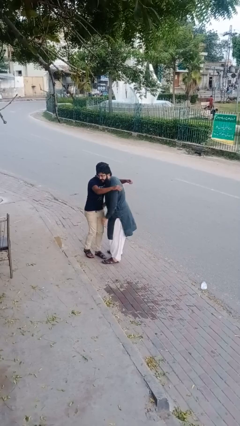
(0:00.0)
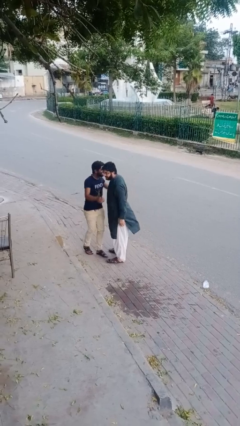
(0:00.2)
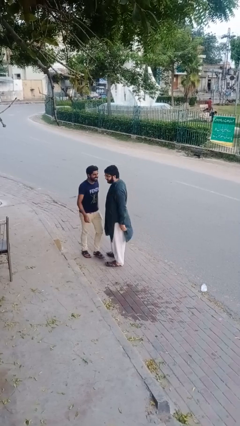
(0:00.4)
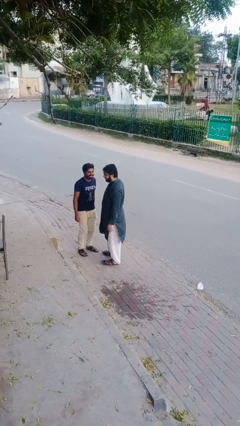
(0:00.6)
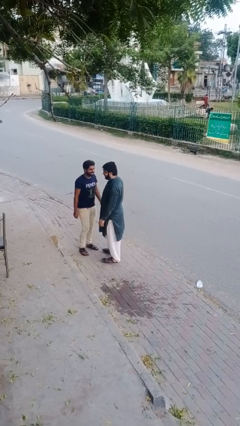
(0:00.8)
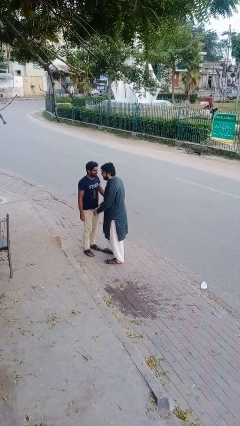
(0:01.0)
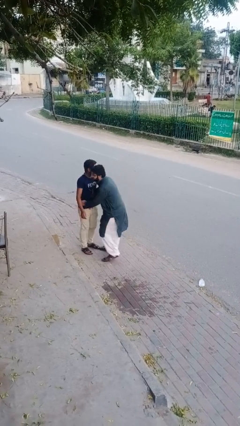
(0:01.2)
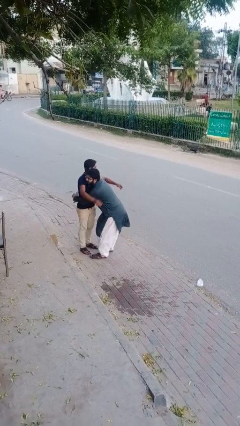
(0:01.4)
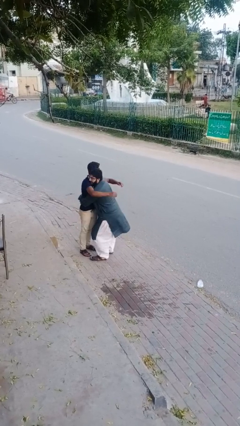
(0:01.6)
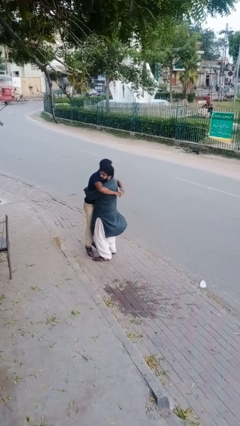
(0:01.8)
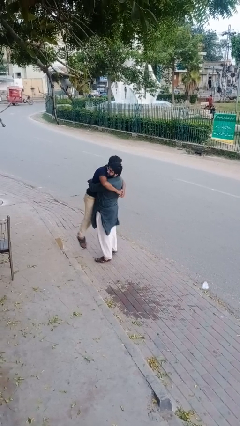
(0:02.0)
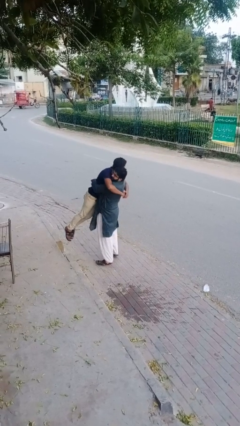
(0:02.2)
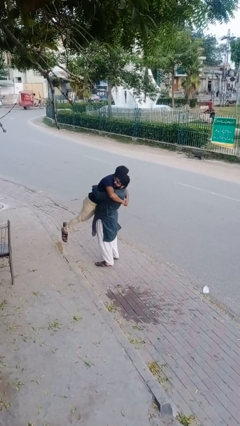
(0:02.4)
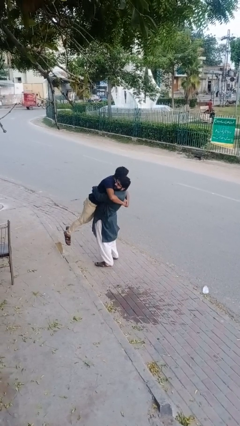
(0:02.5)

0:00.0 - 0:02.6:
person picks up person

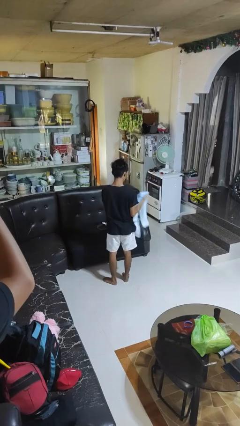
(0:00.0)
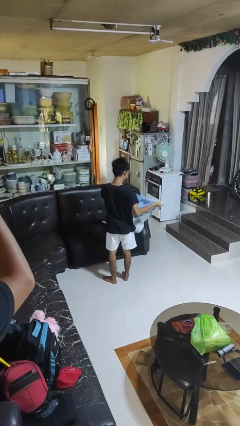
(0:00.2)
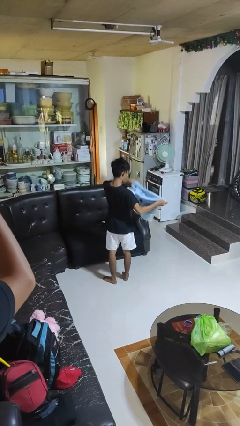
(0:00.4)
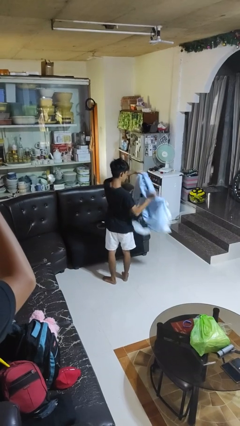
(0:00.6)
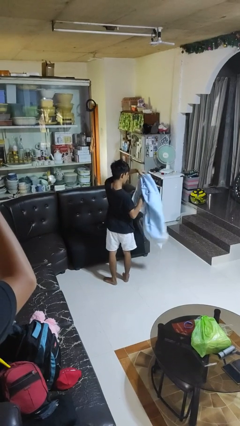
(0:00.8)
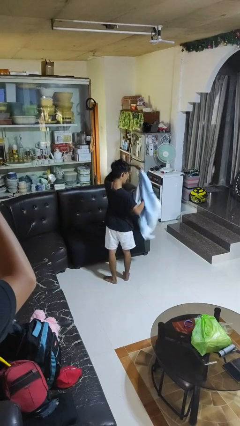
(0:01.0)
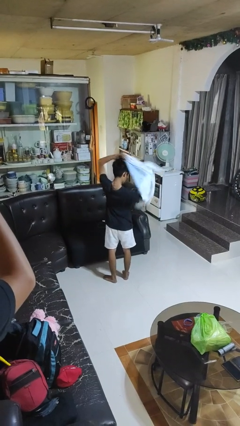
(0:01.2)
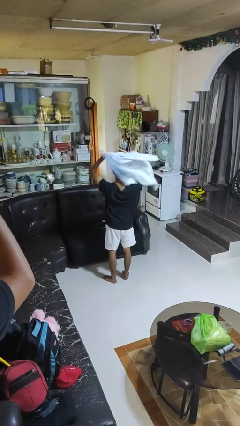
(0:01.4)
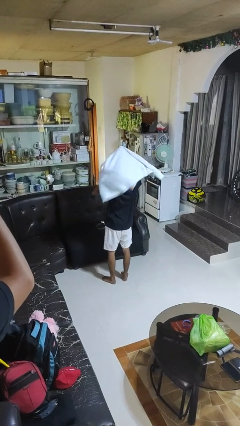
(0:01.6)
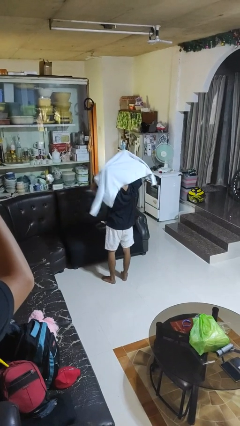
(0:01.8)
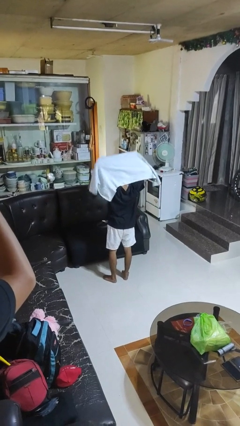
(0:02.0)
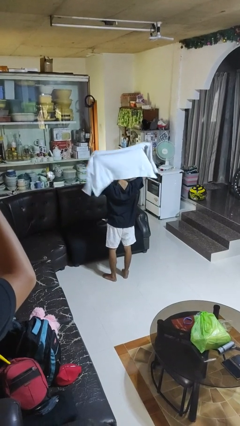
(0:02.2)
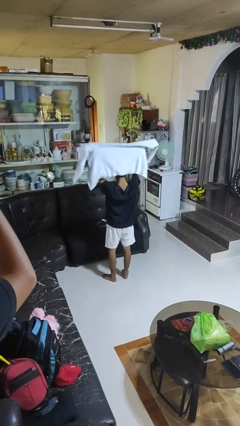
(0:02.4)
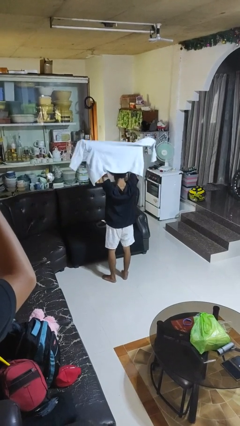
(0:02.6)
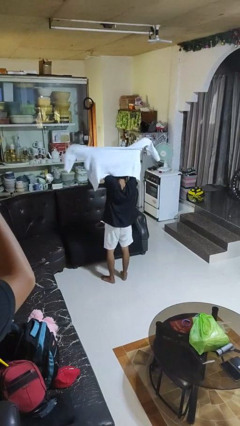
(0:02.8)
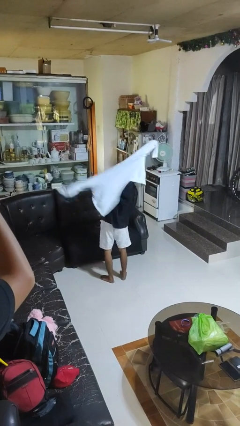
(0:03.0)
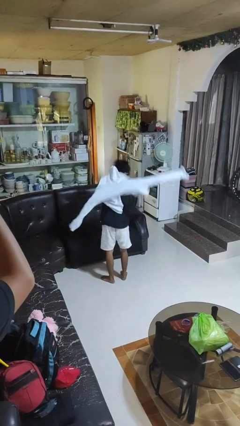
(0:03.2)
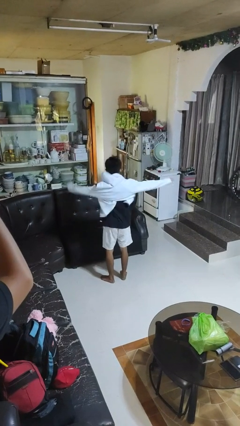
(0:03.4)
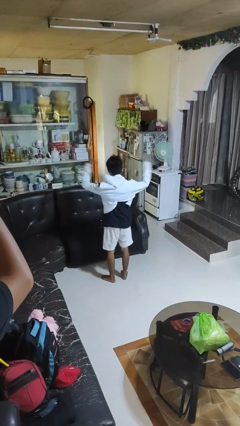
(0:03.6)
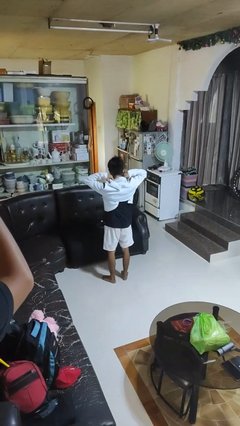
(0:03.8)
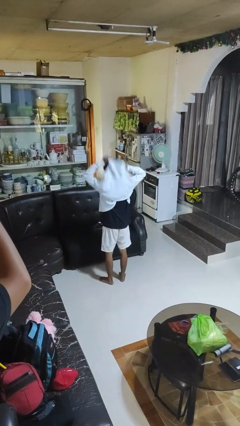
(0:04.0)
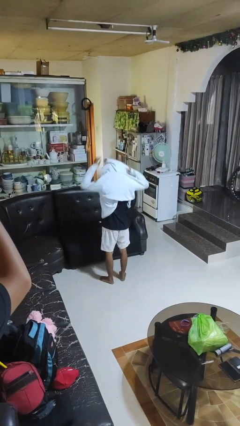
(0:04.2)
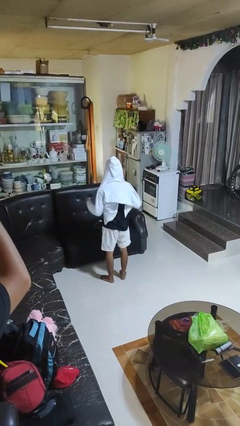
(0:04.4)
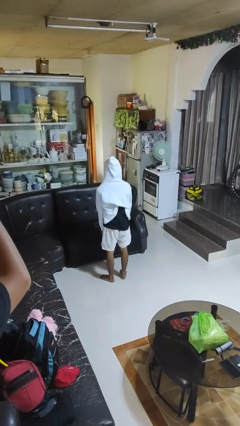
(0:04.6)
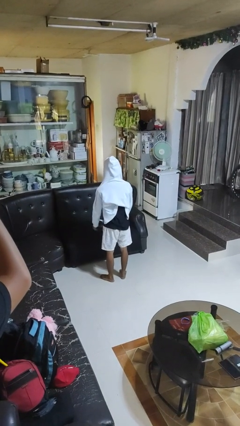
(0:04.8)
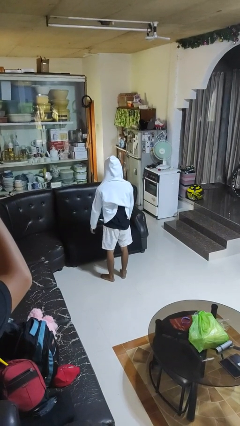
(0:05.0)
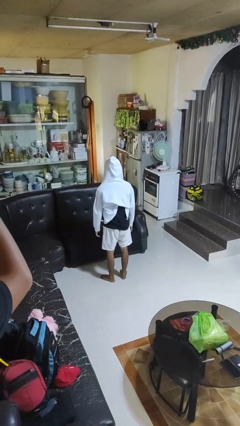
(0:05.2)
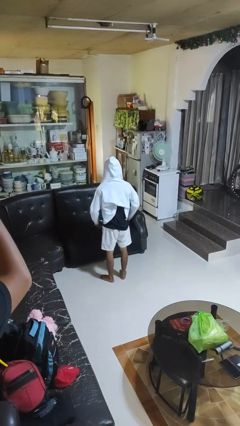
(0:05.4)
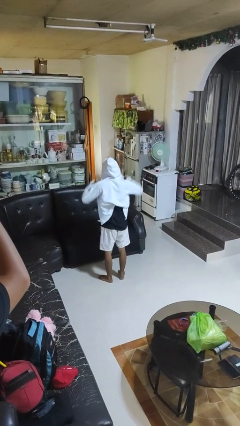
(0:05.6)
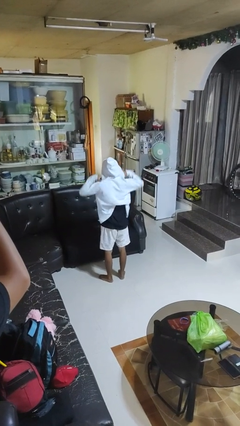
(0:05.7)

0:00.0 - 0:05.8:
person puts on hoodie

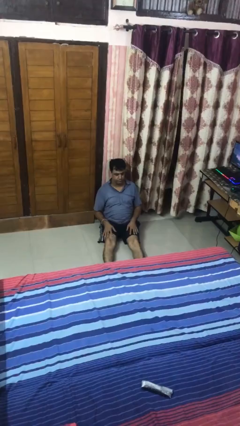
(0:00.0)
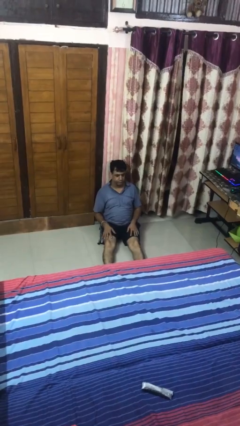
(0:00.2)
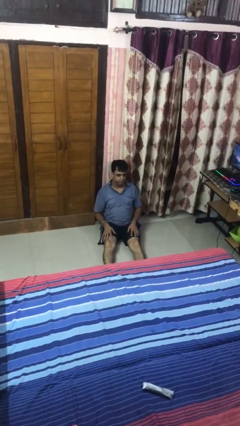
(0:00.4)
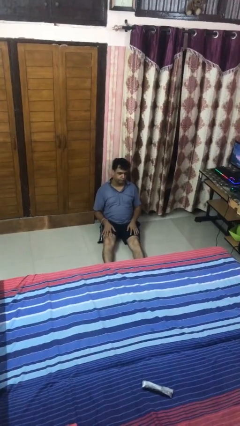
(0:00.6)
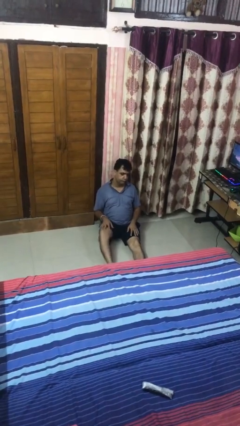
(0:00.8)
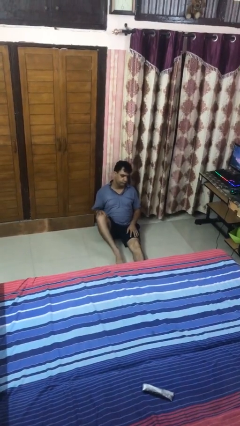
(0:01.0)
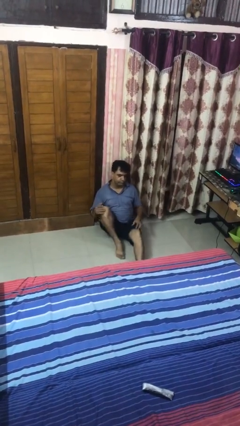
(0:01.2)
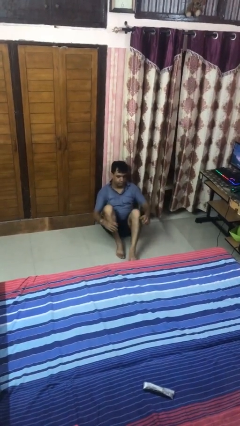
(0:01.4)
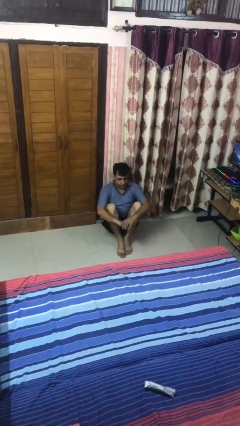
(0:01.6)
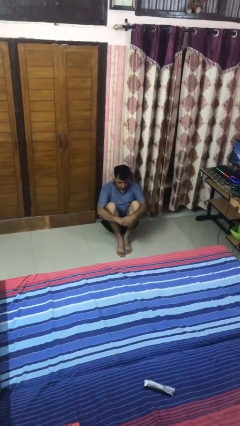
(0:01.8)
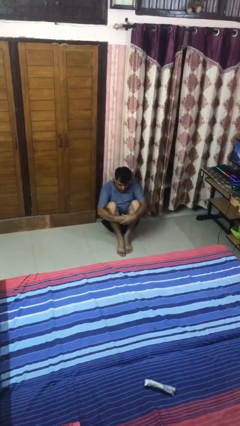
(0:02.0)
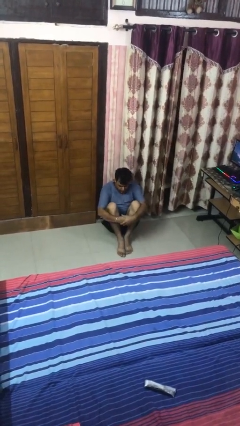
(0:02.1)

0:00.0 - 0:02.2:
person crosses legs

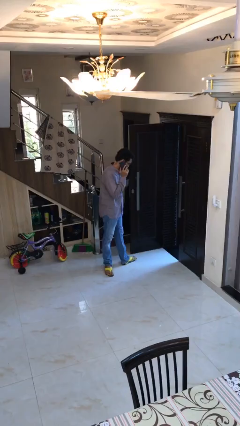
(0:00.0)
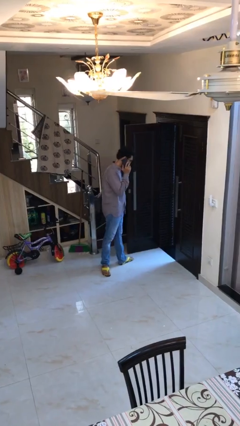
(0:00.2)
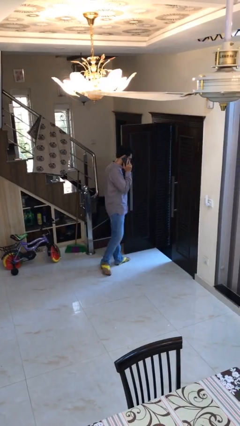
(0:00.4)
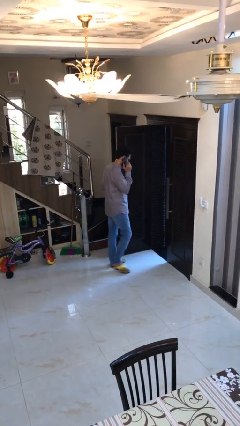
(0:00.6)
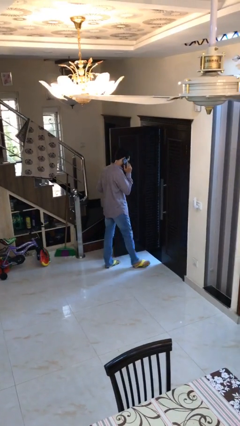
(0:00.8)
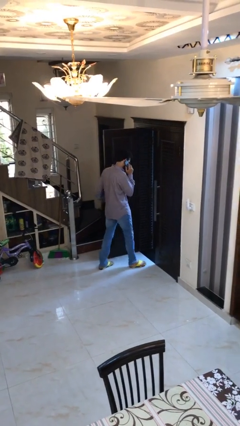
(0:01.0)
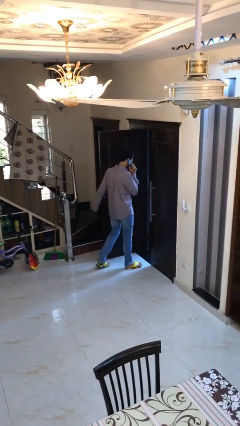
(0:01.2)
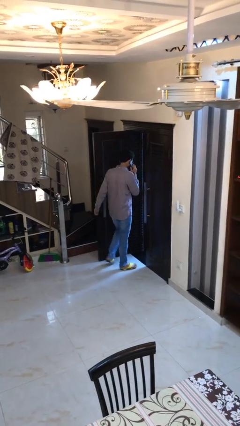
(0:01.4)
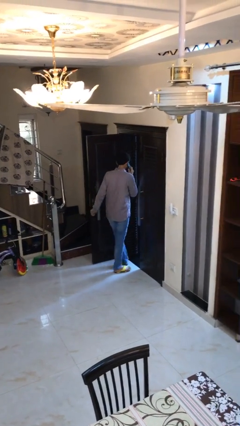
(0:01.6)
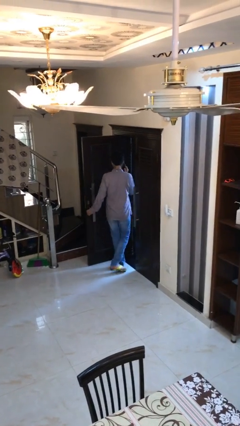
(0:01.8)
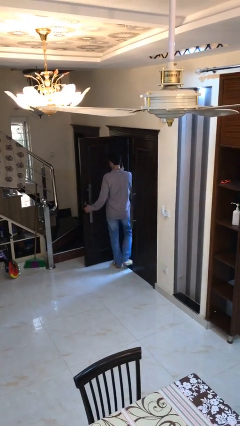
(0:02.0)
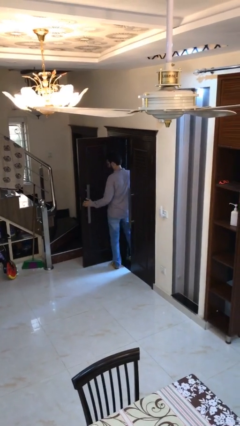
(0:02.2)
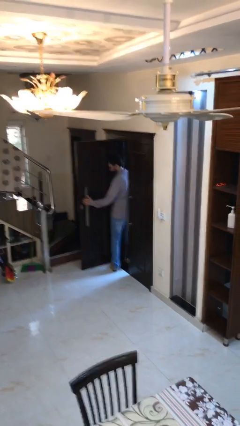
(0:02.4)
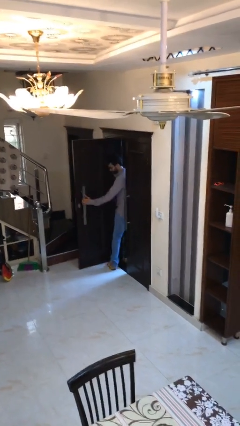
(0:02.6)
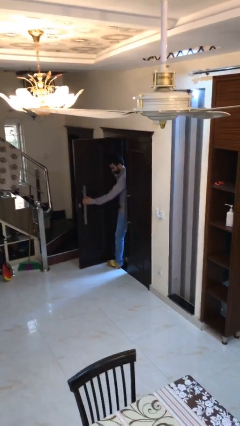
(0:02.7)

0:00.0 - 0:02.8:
person exits scene through structure

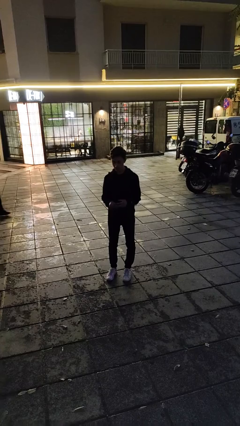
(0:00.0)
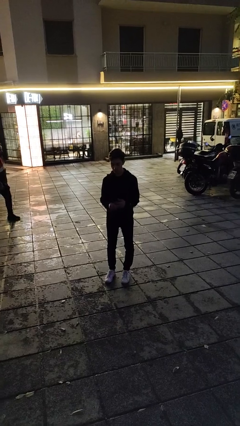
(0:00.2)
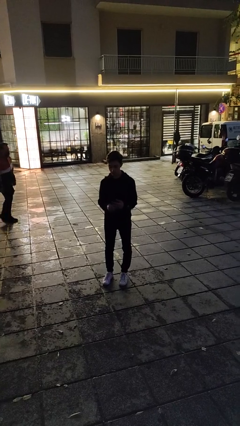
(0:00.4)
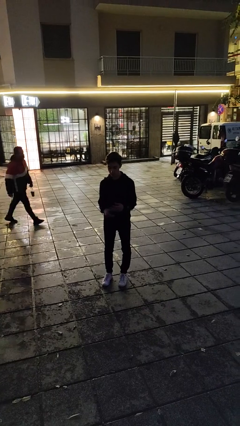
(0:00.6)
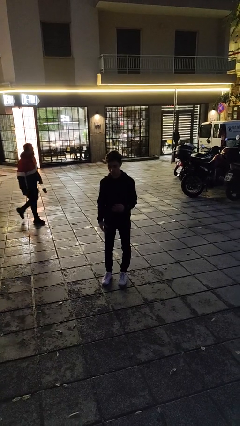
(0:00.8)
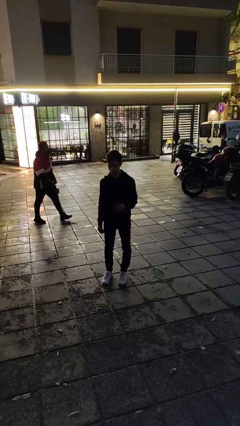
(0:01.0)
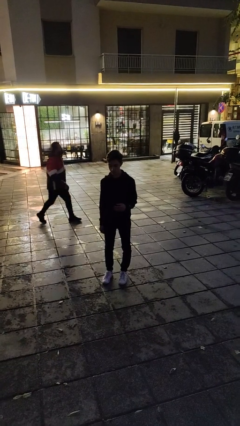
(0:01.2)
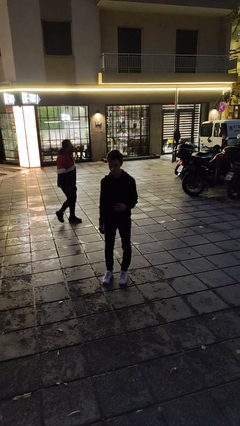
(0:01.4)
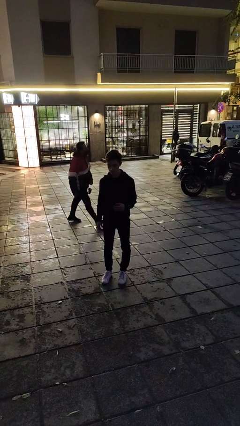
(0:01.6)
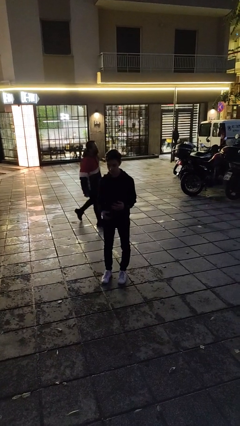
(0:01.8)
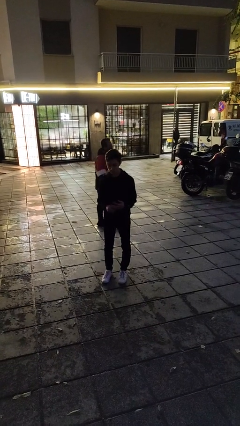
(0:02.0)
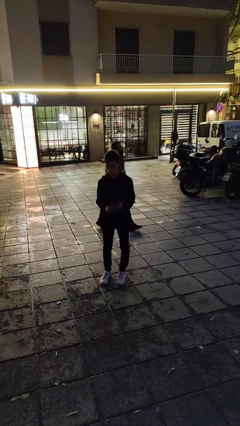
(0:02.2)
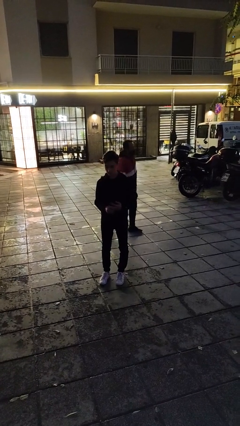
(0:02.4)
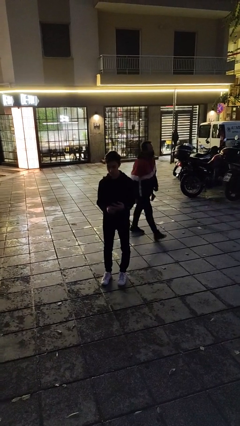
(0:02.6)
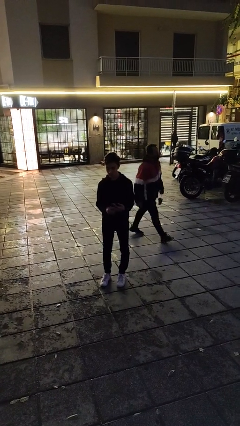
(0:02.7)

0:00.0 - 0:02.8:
person puts on ring

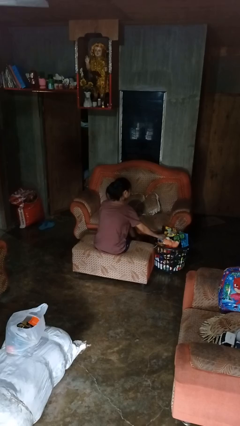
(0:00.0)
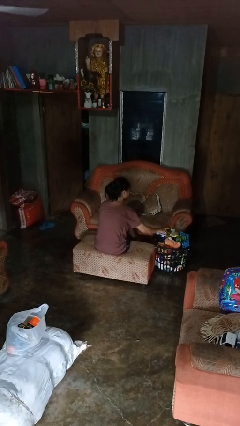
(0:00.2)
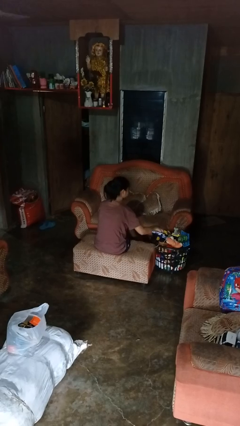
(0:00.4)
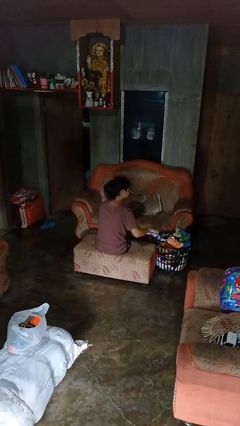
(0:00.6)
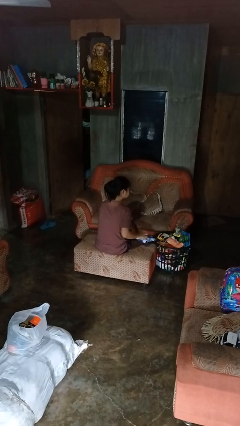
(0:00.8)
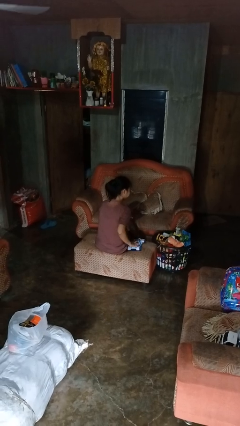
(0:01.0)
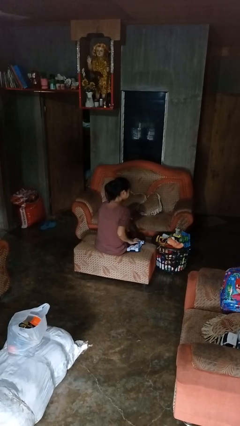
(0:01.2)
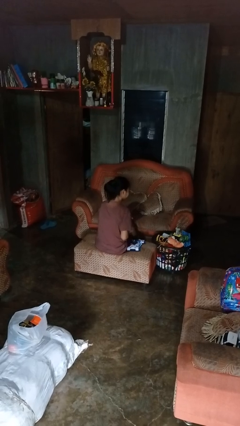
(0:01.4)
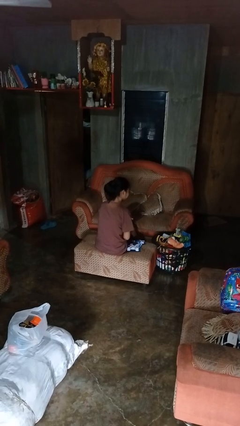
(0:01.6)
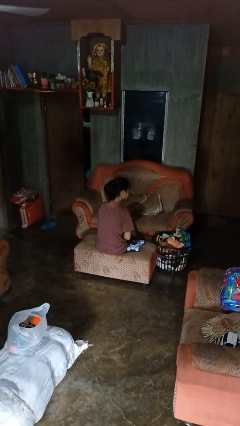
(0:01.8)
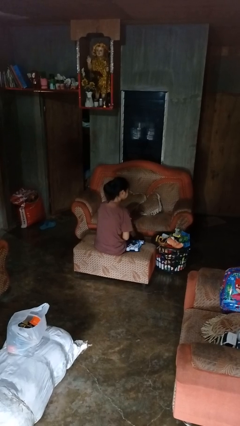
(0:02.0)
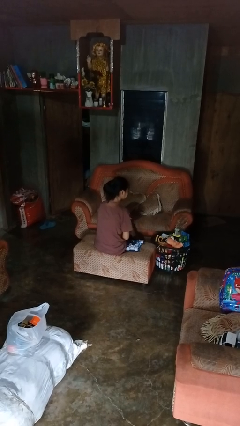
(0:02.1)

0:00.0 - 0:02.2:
person takes object from basket
